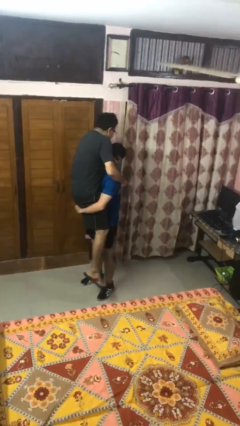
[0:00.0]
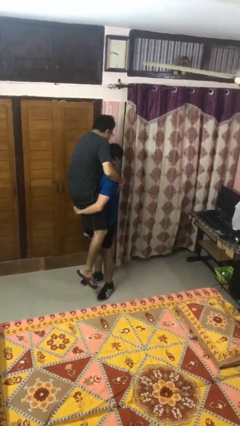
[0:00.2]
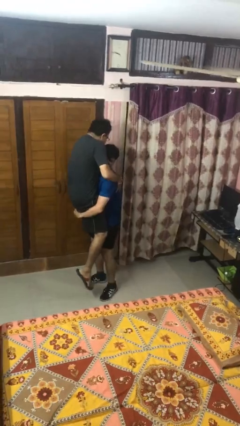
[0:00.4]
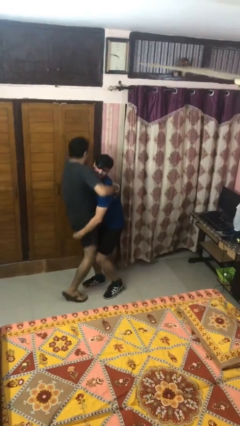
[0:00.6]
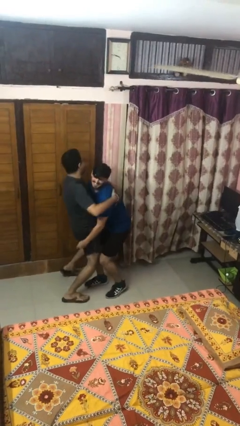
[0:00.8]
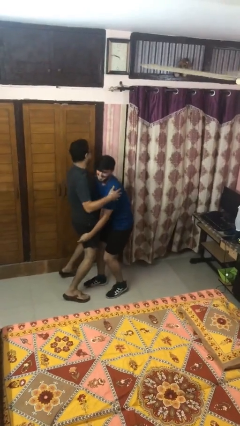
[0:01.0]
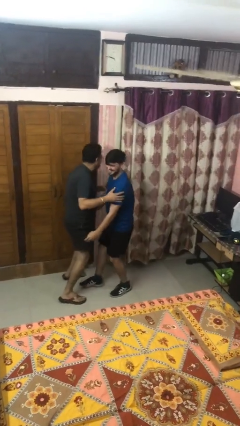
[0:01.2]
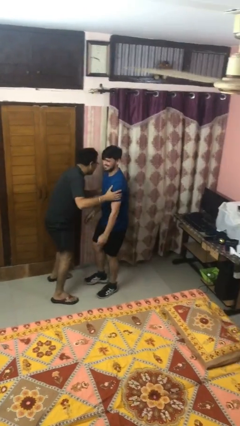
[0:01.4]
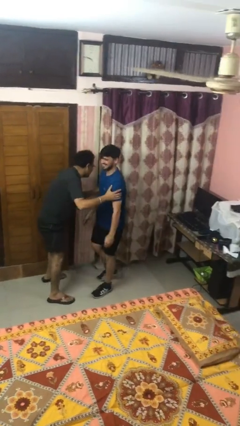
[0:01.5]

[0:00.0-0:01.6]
person puts down person

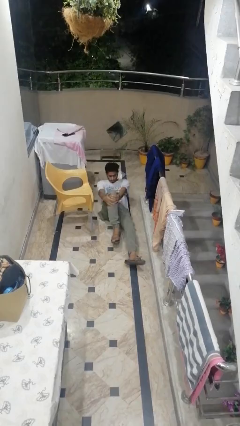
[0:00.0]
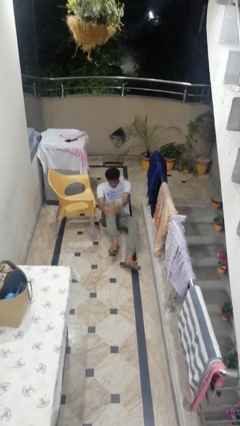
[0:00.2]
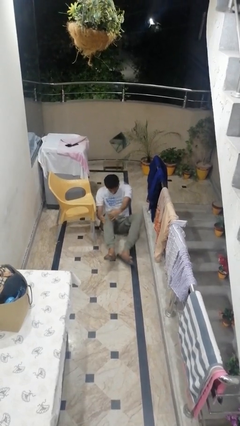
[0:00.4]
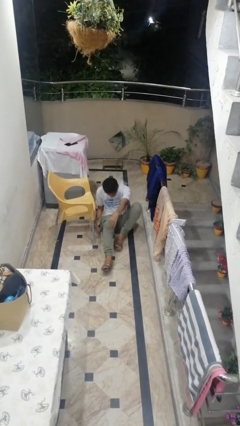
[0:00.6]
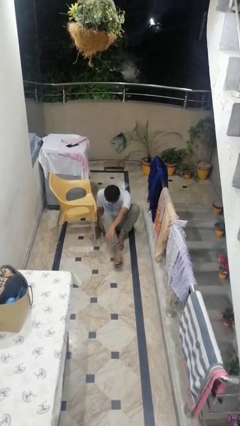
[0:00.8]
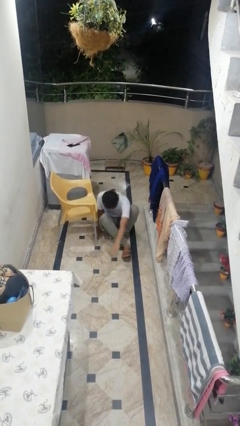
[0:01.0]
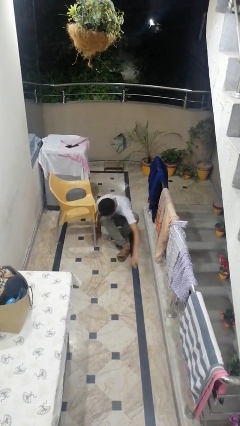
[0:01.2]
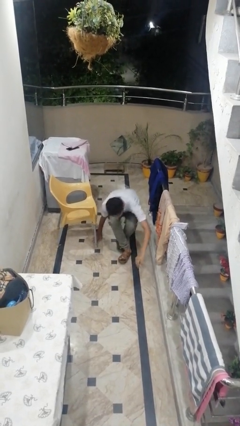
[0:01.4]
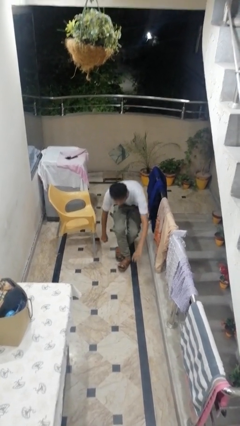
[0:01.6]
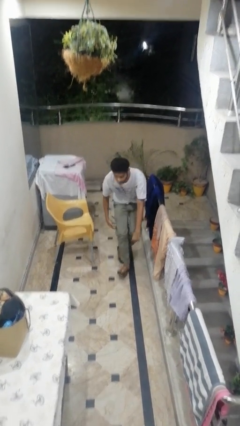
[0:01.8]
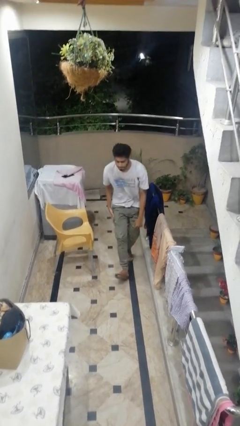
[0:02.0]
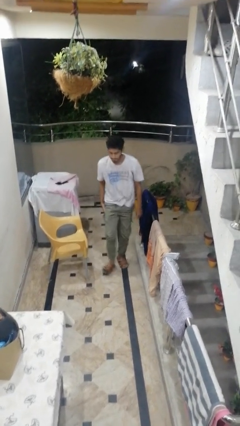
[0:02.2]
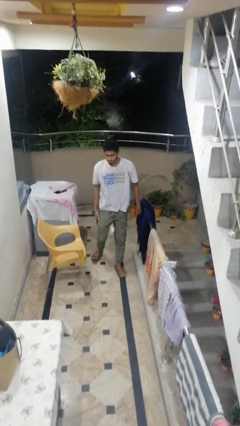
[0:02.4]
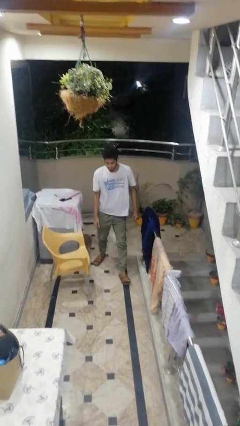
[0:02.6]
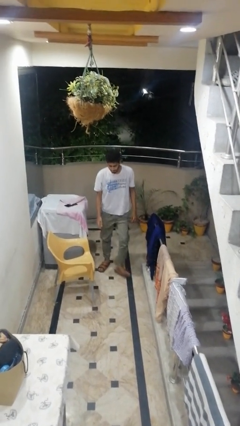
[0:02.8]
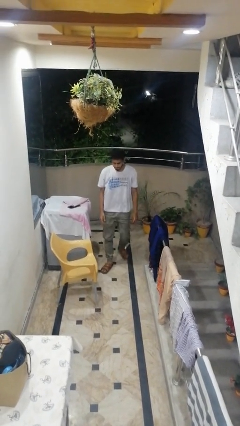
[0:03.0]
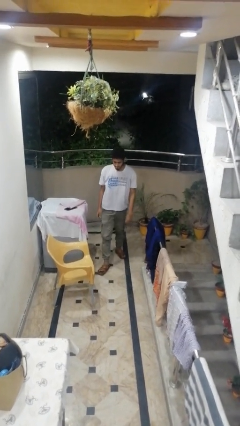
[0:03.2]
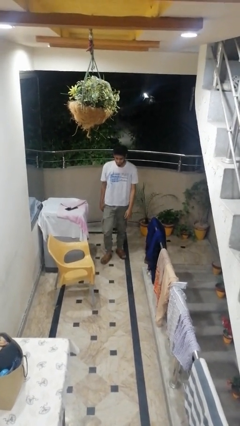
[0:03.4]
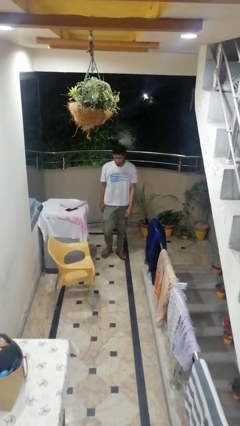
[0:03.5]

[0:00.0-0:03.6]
person stands up from floor

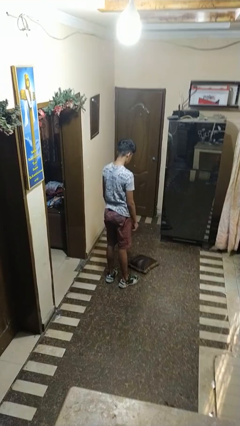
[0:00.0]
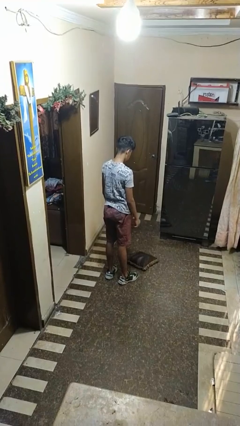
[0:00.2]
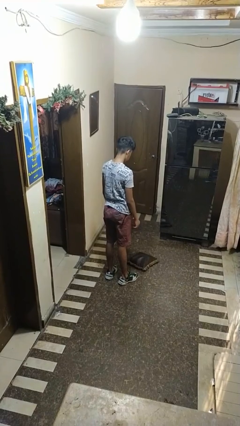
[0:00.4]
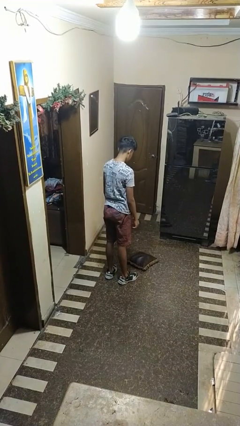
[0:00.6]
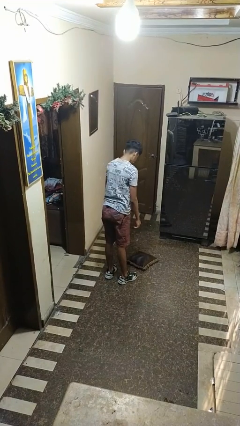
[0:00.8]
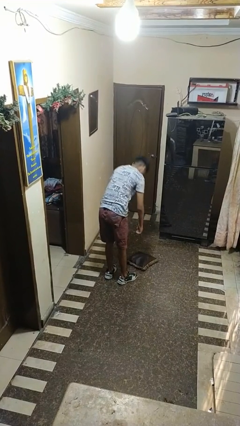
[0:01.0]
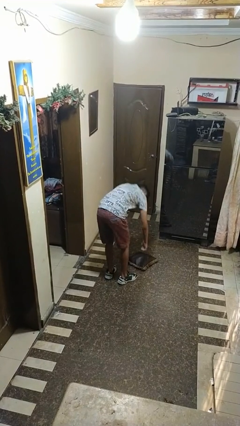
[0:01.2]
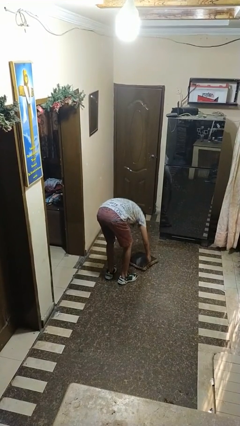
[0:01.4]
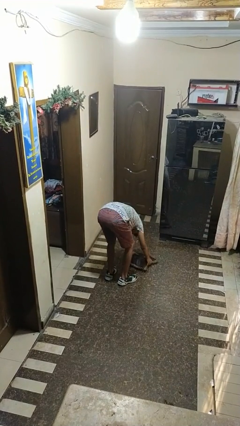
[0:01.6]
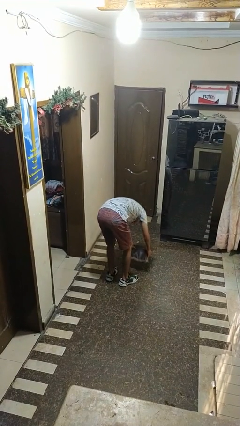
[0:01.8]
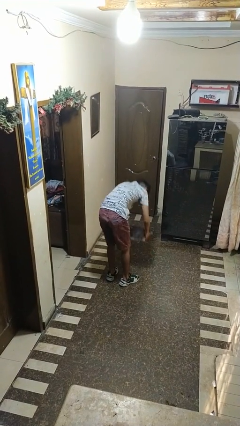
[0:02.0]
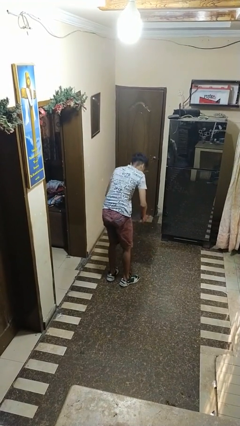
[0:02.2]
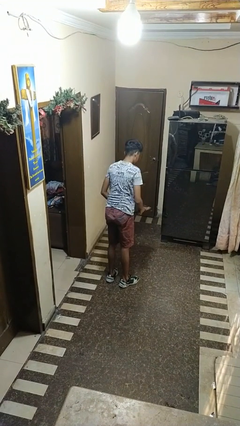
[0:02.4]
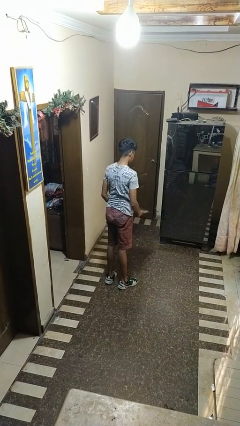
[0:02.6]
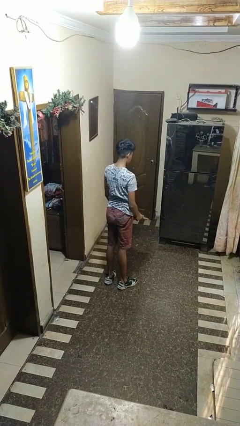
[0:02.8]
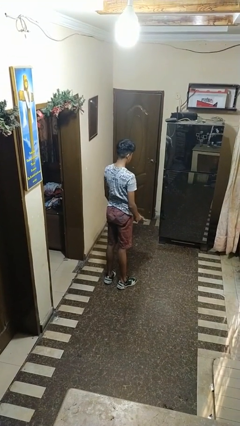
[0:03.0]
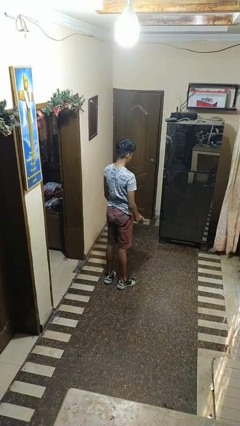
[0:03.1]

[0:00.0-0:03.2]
person picks up object from floor

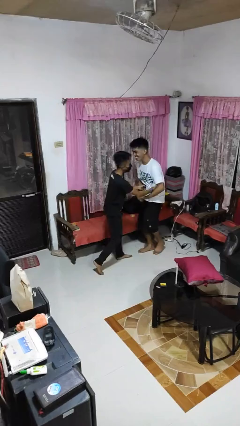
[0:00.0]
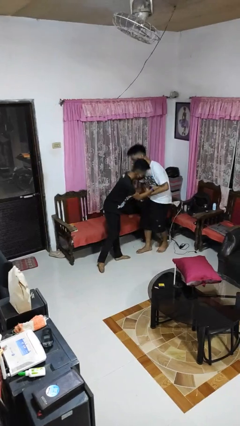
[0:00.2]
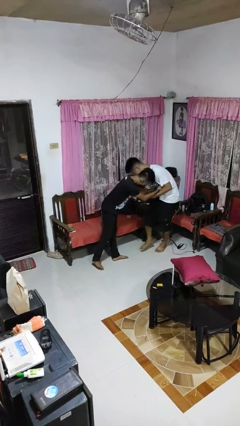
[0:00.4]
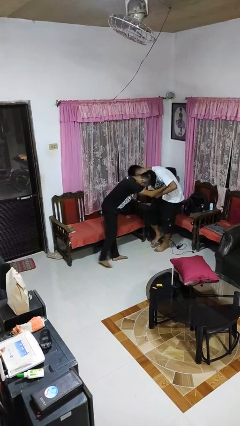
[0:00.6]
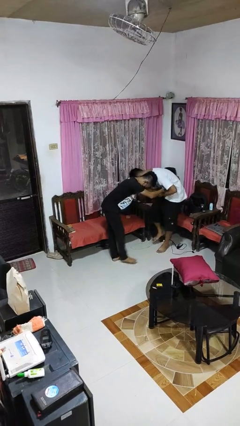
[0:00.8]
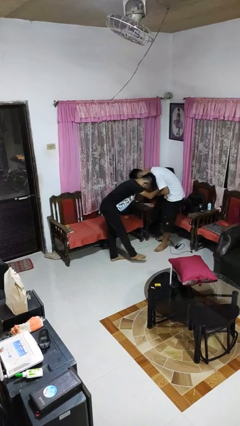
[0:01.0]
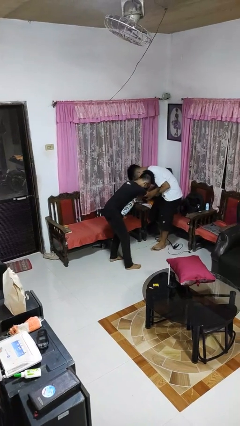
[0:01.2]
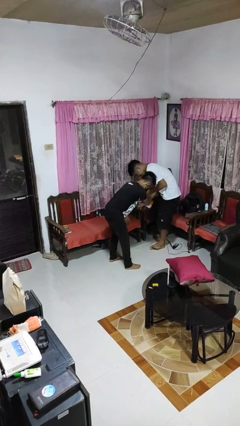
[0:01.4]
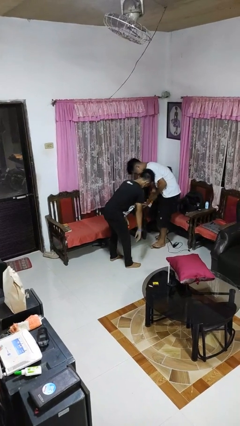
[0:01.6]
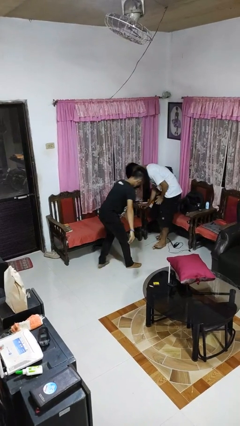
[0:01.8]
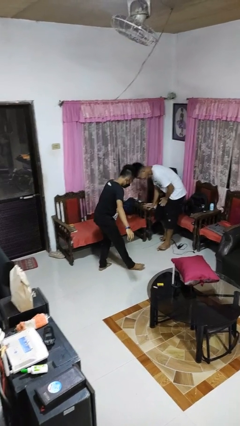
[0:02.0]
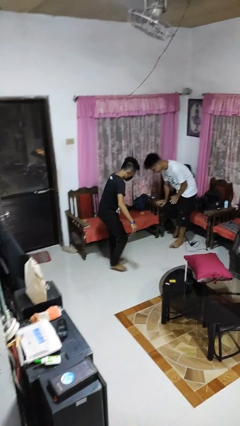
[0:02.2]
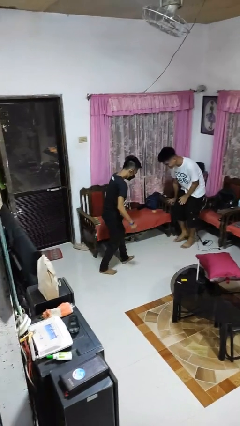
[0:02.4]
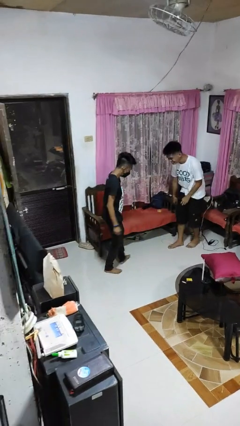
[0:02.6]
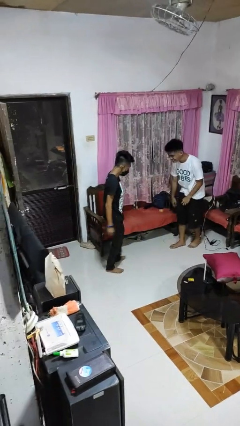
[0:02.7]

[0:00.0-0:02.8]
person tickles person

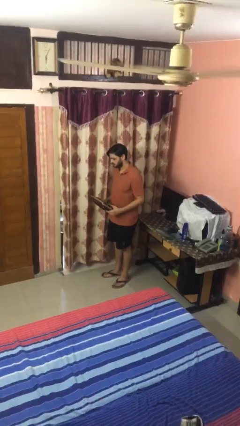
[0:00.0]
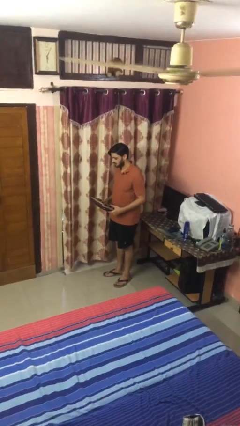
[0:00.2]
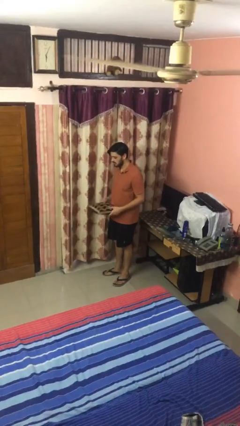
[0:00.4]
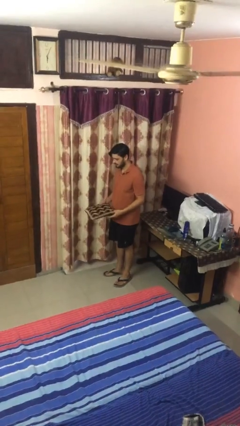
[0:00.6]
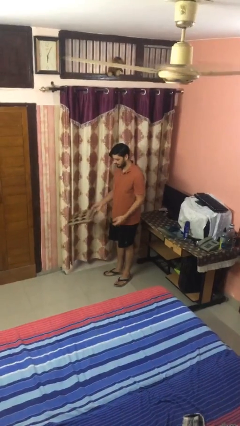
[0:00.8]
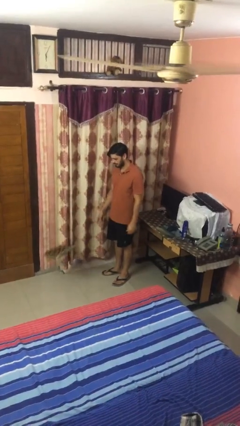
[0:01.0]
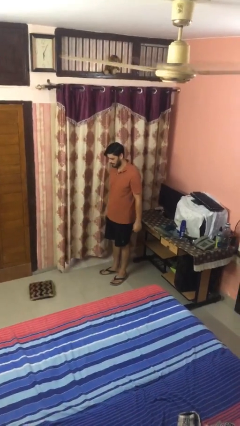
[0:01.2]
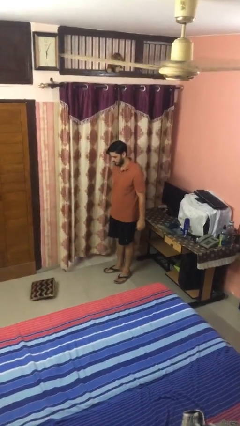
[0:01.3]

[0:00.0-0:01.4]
person throws object to ground

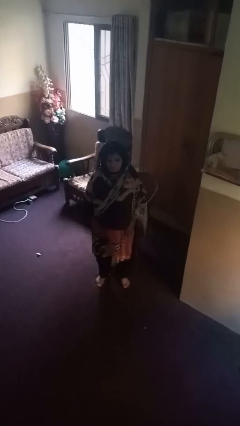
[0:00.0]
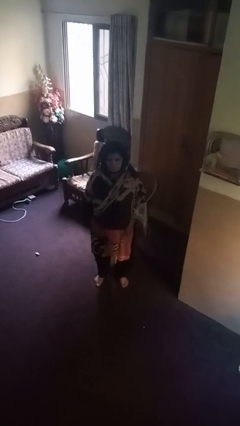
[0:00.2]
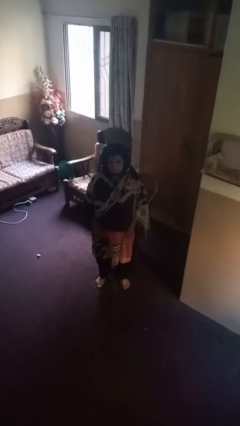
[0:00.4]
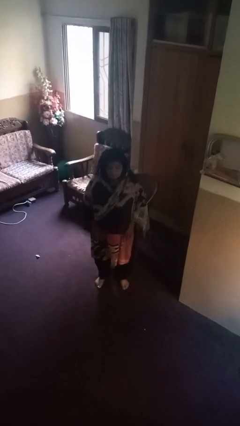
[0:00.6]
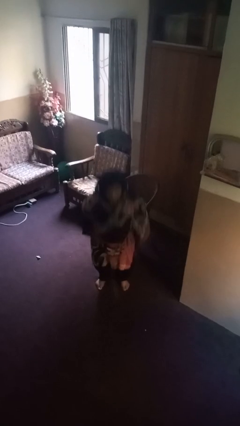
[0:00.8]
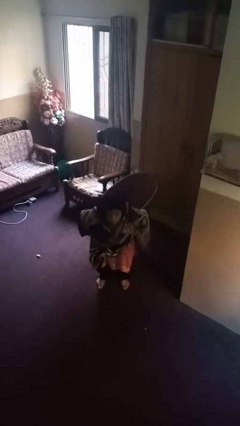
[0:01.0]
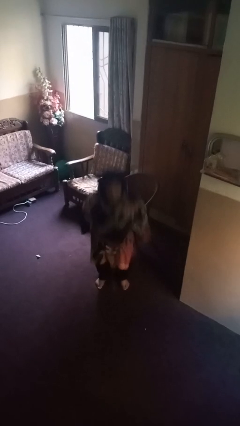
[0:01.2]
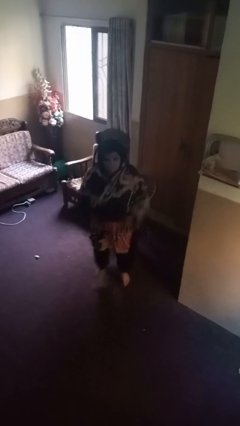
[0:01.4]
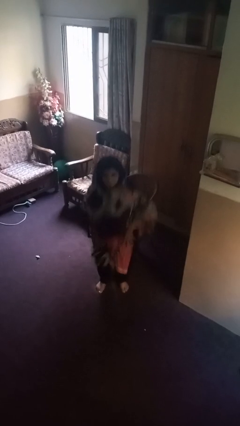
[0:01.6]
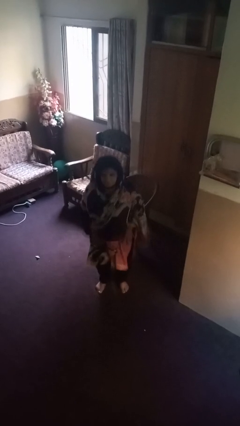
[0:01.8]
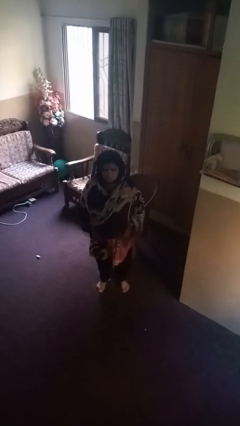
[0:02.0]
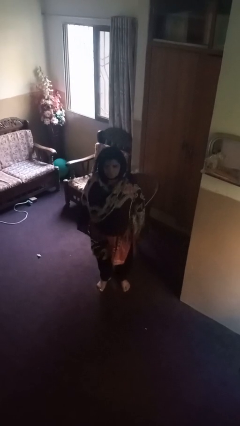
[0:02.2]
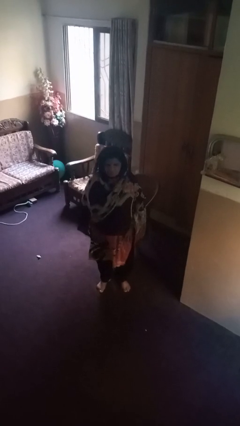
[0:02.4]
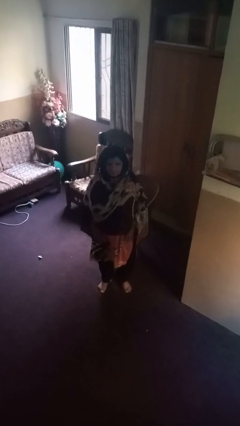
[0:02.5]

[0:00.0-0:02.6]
person jumps

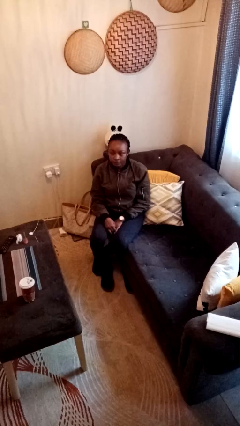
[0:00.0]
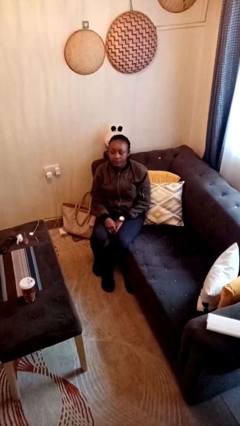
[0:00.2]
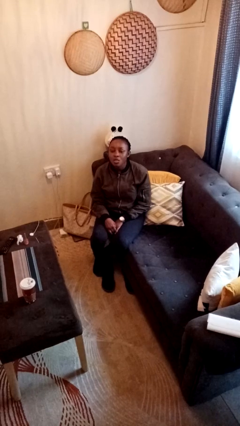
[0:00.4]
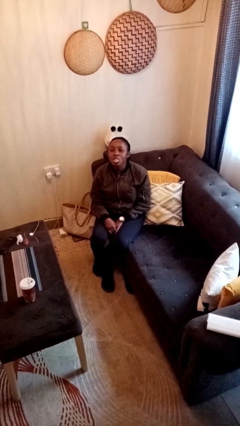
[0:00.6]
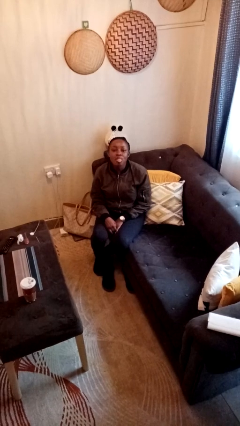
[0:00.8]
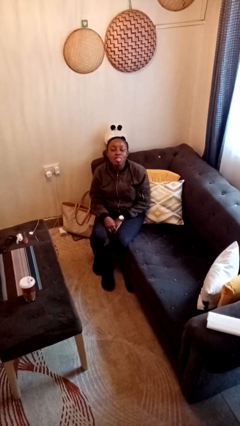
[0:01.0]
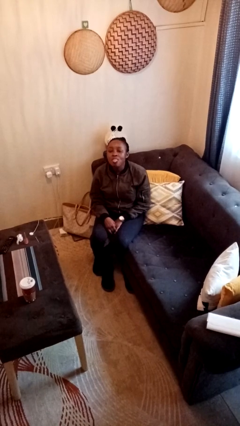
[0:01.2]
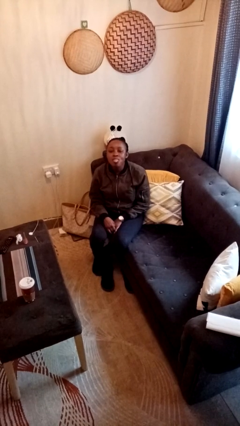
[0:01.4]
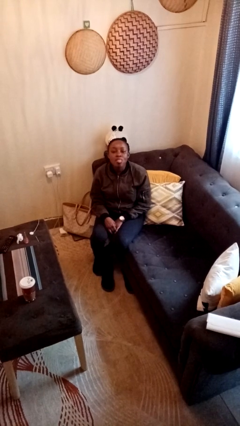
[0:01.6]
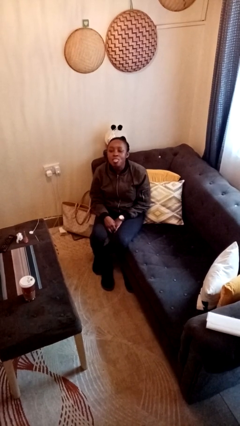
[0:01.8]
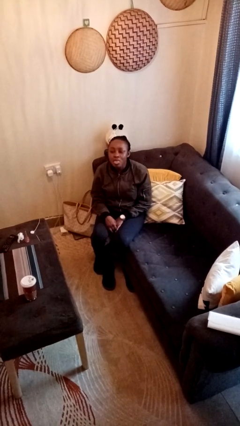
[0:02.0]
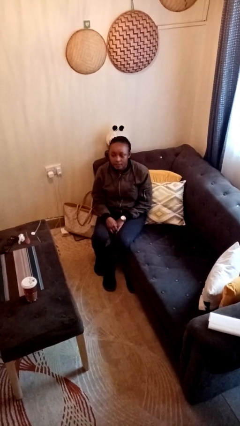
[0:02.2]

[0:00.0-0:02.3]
person sticks out tongue
